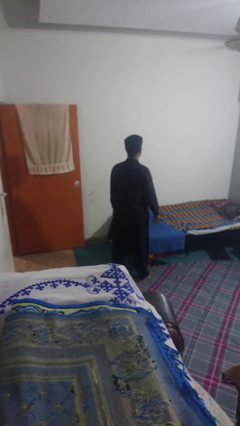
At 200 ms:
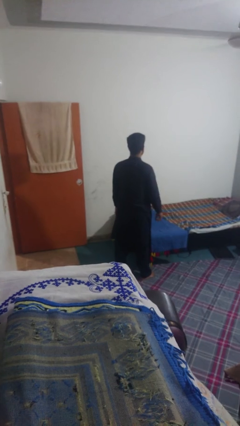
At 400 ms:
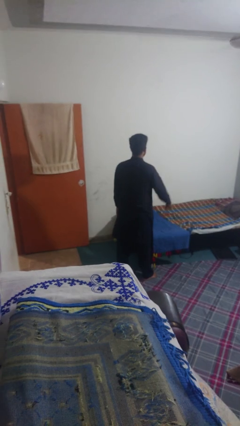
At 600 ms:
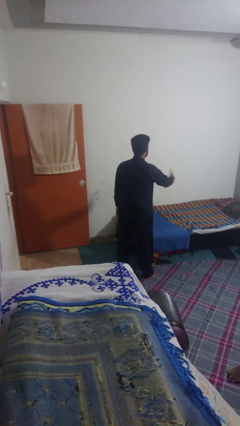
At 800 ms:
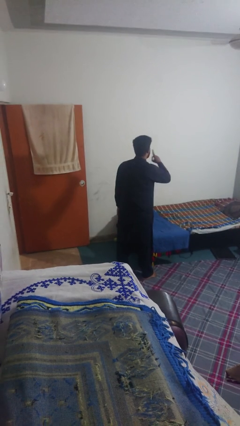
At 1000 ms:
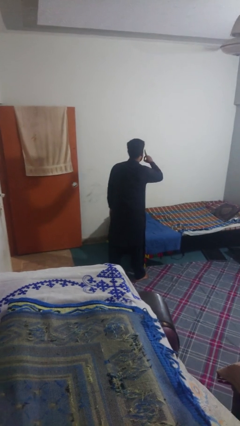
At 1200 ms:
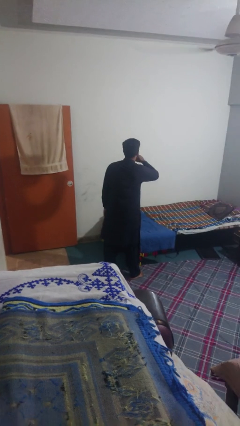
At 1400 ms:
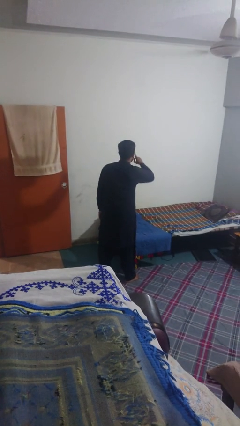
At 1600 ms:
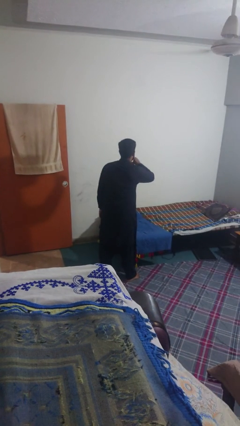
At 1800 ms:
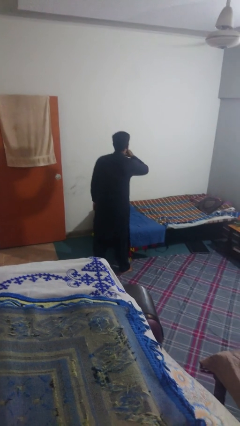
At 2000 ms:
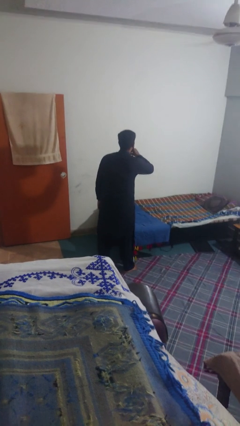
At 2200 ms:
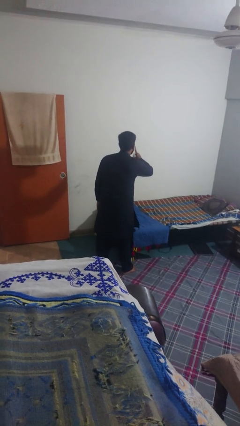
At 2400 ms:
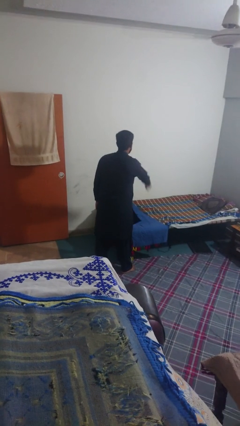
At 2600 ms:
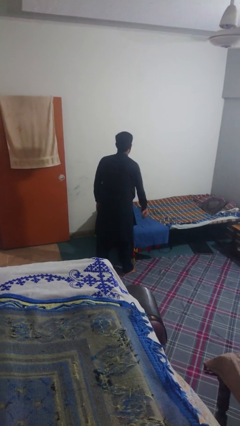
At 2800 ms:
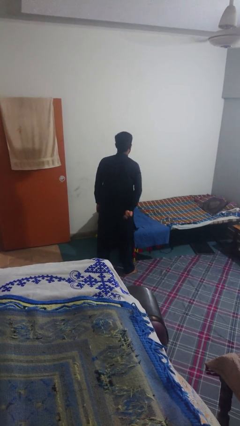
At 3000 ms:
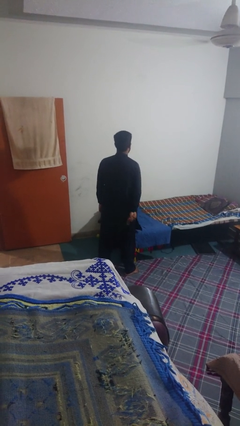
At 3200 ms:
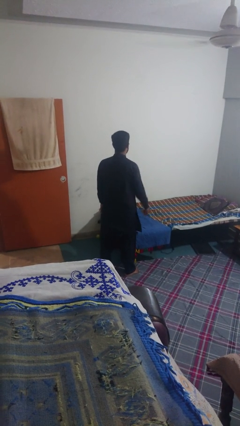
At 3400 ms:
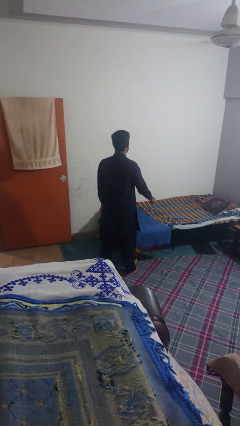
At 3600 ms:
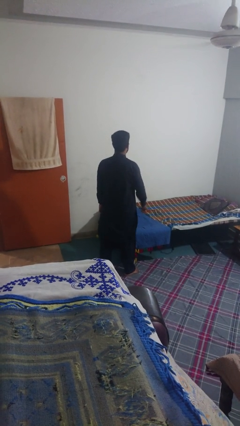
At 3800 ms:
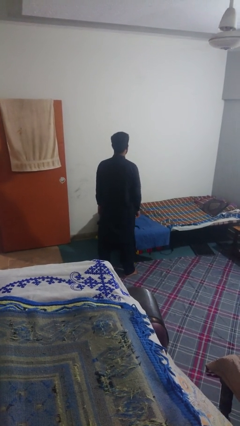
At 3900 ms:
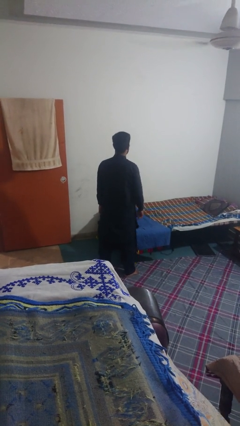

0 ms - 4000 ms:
person gestures be quiet

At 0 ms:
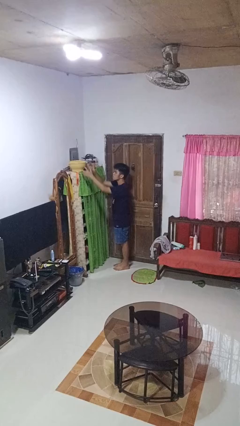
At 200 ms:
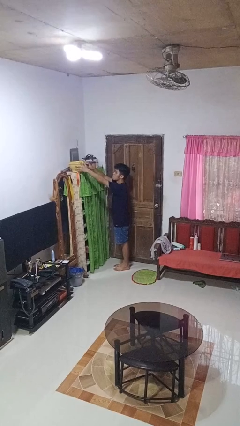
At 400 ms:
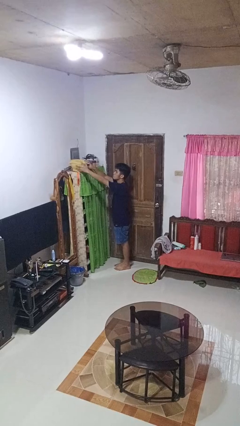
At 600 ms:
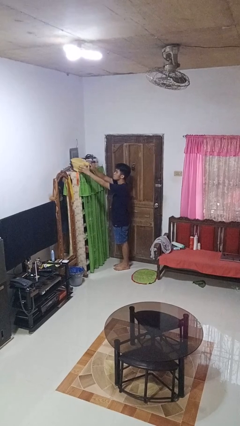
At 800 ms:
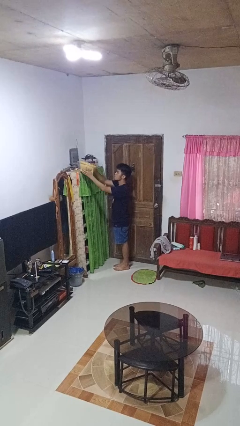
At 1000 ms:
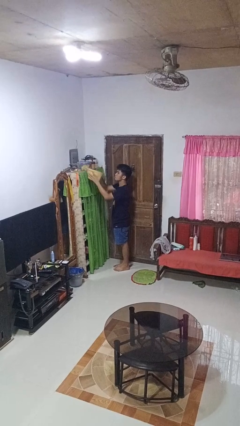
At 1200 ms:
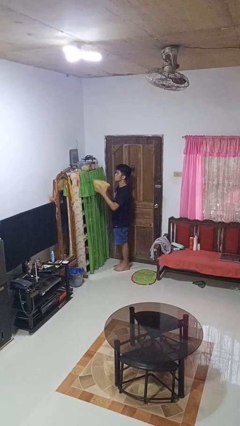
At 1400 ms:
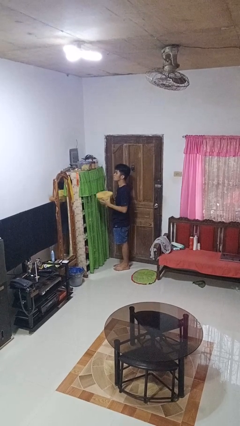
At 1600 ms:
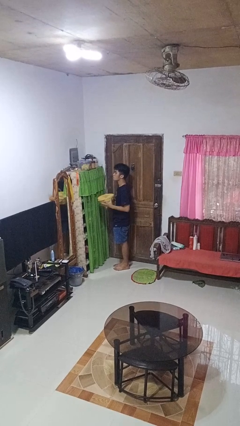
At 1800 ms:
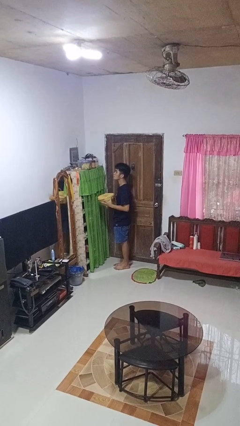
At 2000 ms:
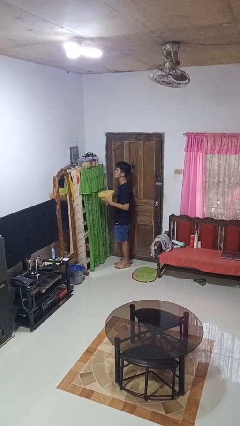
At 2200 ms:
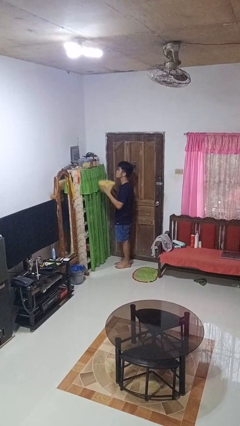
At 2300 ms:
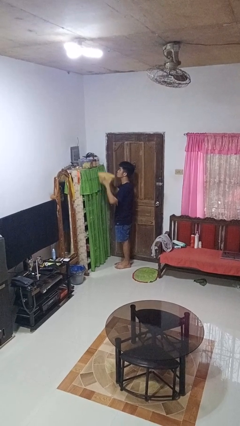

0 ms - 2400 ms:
person picks up object from shelf

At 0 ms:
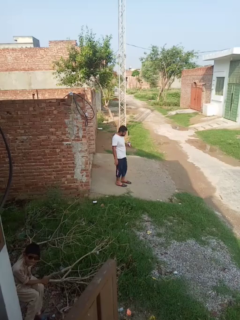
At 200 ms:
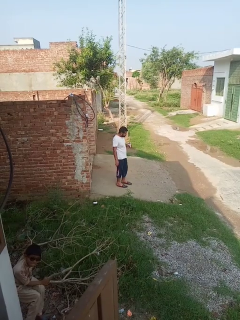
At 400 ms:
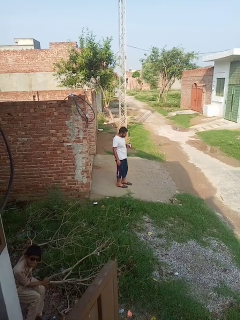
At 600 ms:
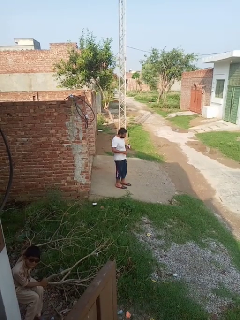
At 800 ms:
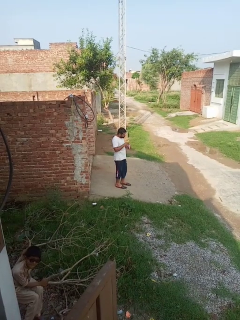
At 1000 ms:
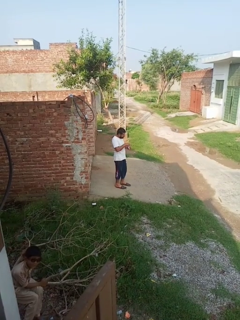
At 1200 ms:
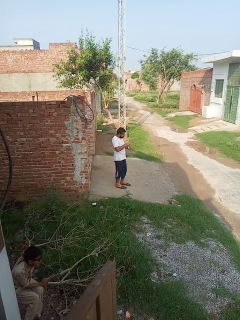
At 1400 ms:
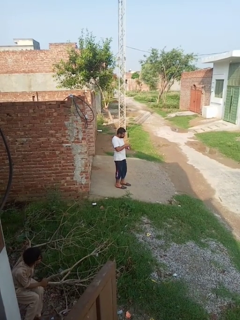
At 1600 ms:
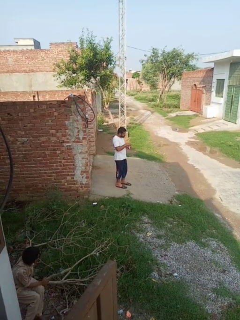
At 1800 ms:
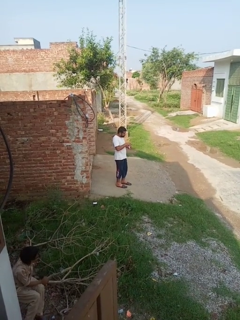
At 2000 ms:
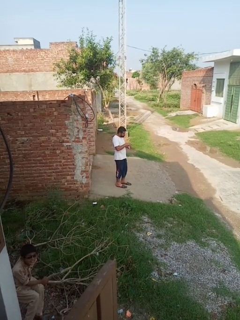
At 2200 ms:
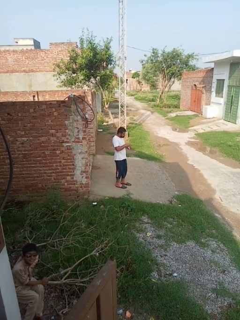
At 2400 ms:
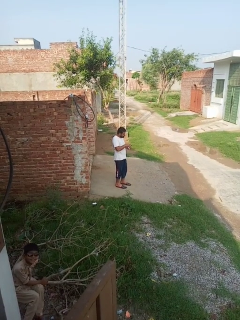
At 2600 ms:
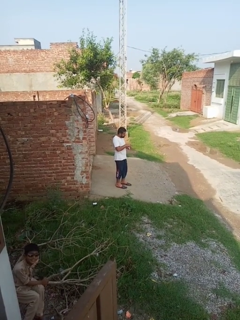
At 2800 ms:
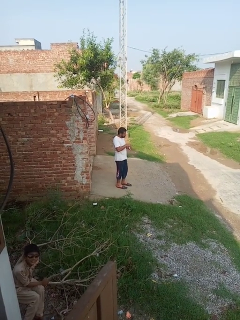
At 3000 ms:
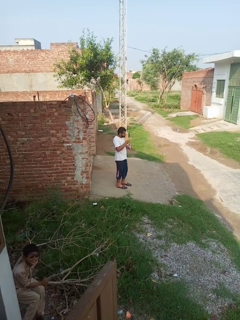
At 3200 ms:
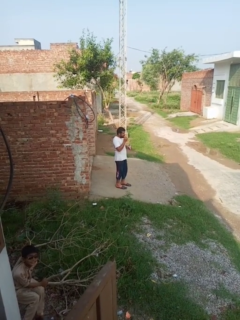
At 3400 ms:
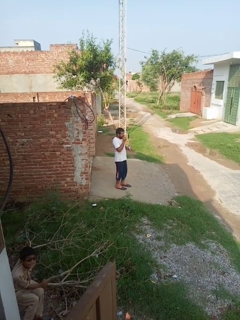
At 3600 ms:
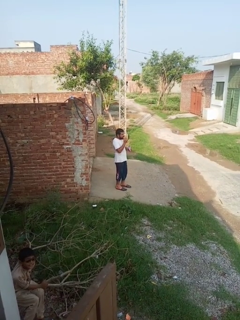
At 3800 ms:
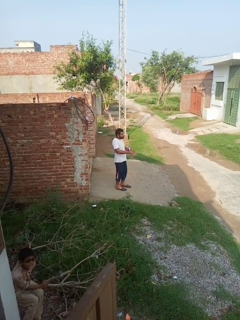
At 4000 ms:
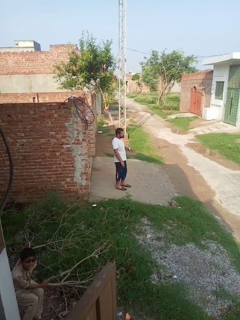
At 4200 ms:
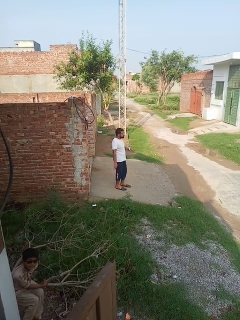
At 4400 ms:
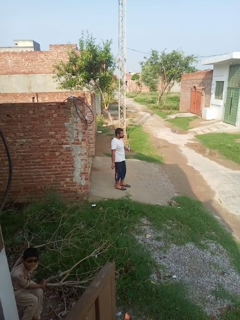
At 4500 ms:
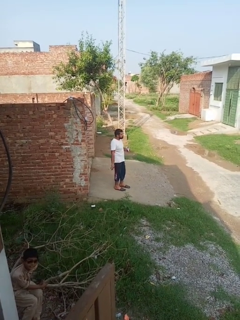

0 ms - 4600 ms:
person eats snack from bag

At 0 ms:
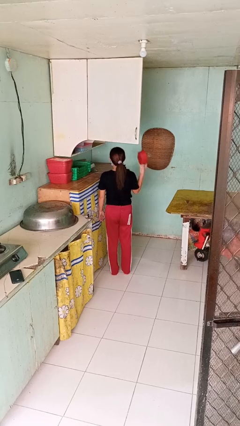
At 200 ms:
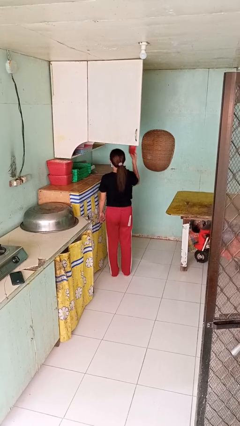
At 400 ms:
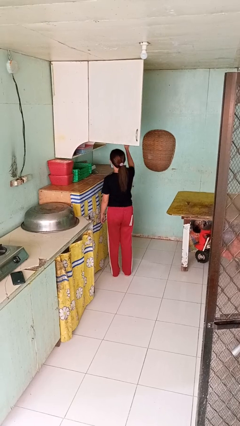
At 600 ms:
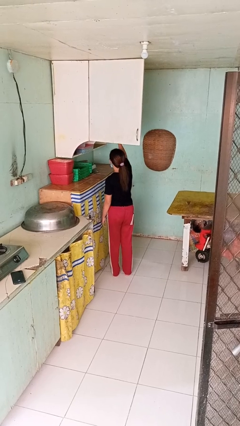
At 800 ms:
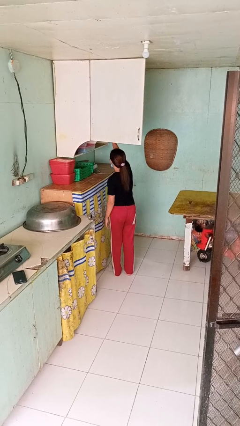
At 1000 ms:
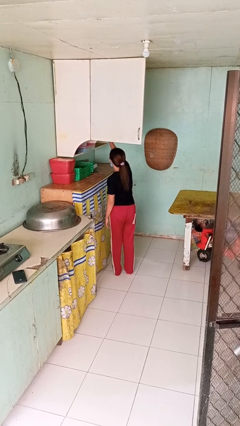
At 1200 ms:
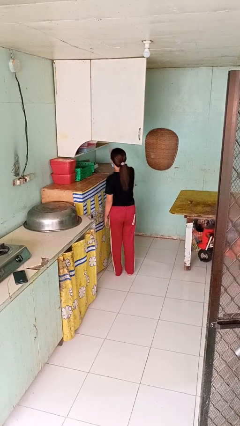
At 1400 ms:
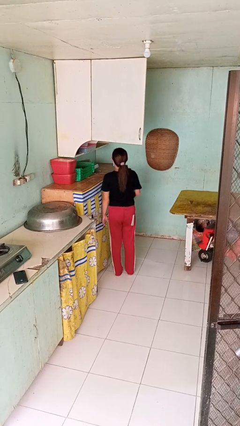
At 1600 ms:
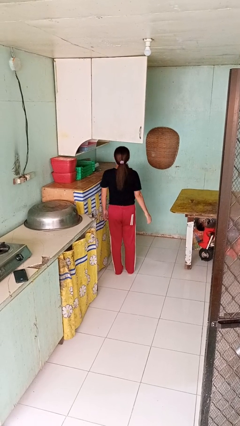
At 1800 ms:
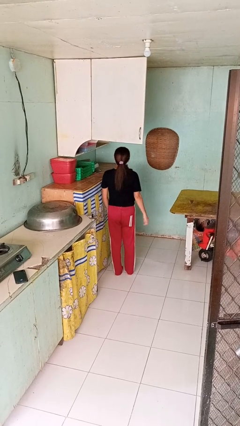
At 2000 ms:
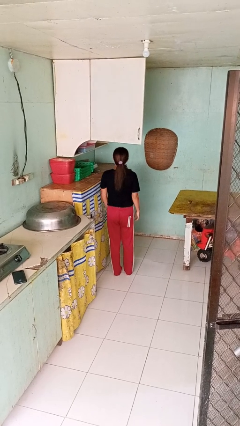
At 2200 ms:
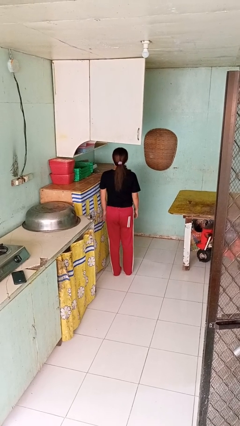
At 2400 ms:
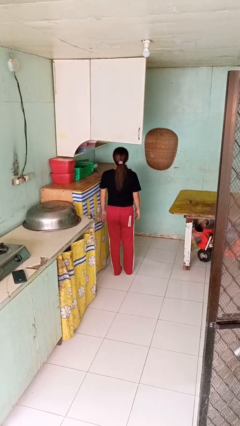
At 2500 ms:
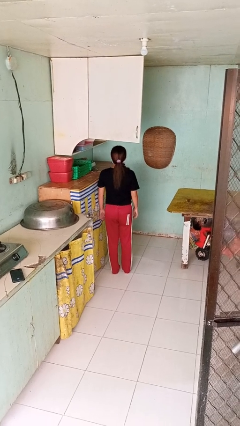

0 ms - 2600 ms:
person puts object in cabinet

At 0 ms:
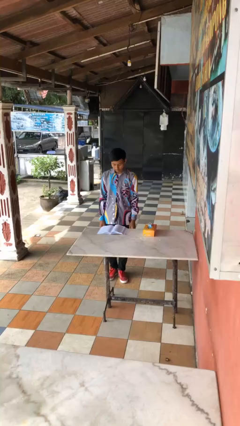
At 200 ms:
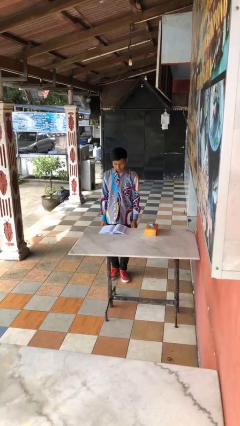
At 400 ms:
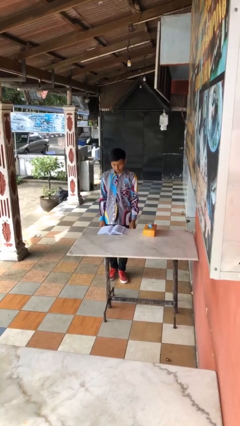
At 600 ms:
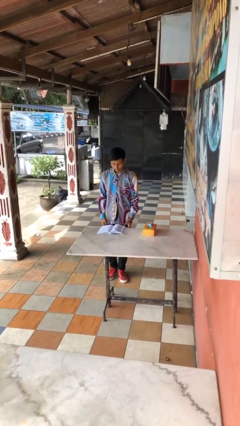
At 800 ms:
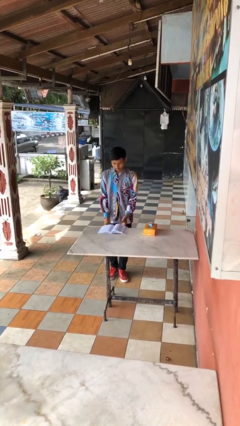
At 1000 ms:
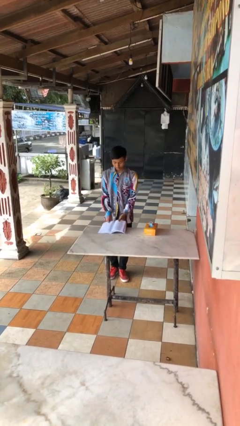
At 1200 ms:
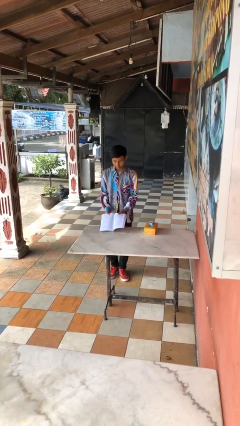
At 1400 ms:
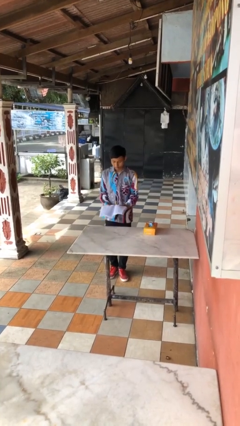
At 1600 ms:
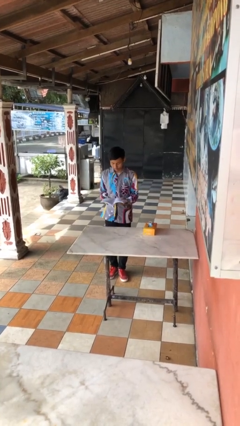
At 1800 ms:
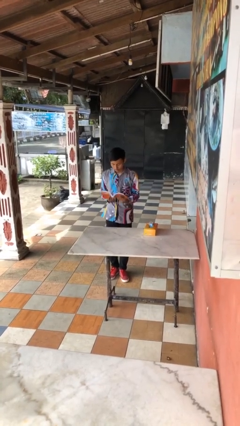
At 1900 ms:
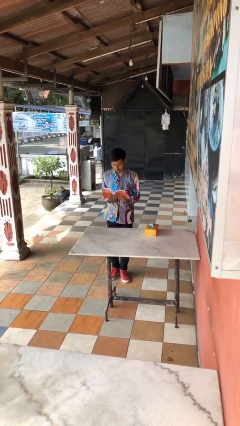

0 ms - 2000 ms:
person picks up object from table

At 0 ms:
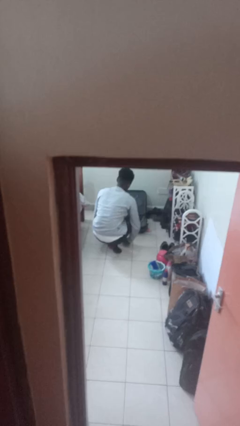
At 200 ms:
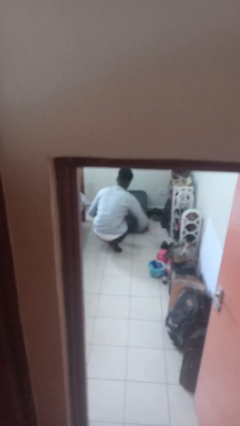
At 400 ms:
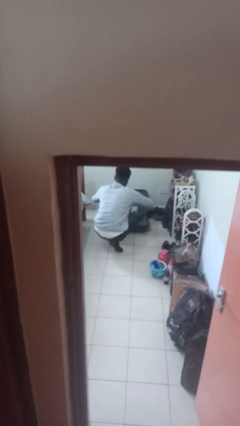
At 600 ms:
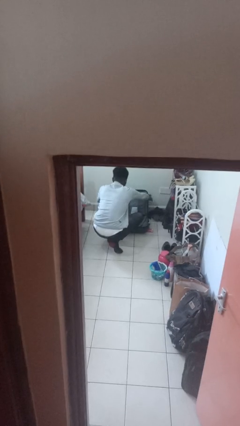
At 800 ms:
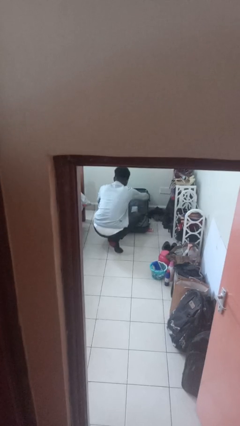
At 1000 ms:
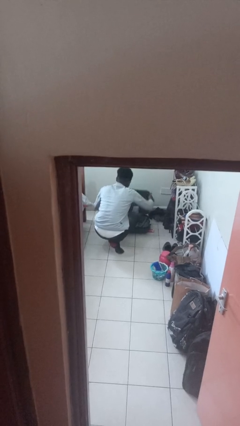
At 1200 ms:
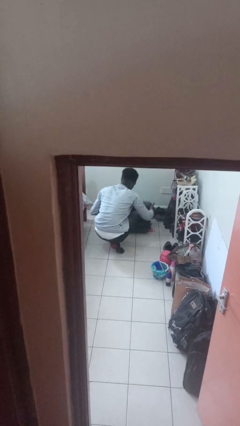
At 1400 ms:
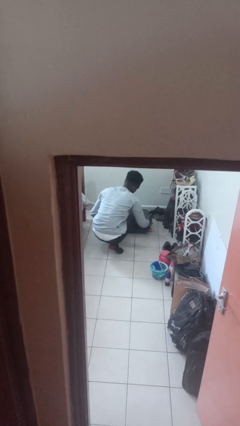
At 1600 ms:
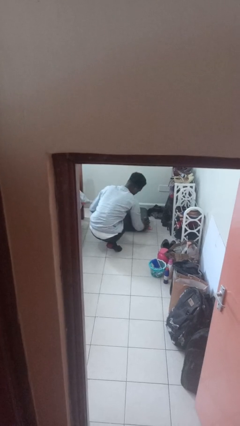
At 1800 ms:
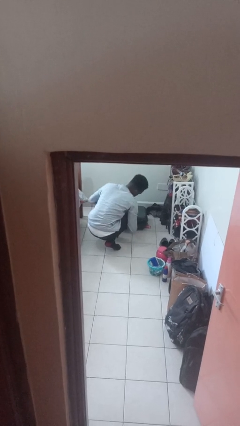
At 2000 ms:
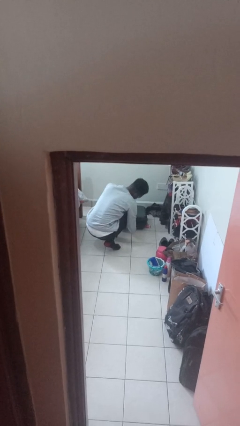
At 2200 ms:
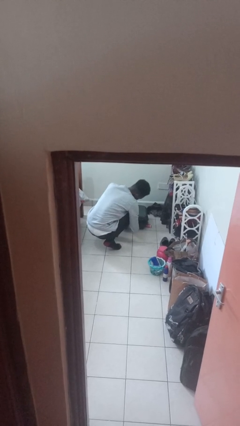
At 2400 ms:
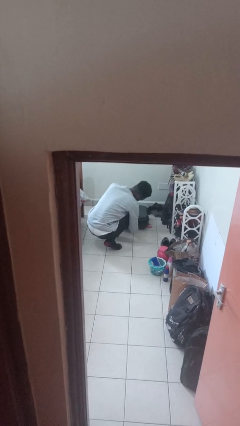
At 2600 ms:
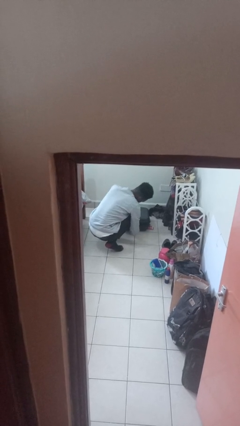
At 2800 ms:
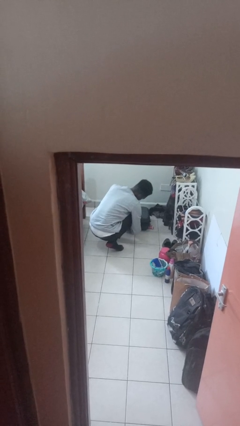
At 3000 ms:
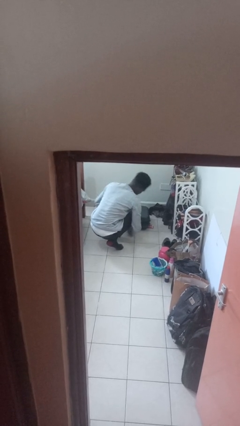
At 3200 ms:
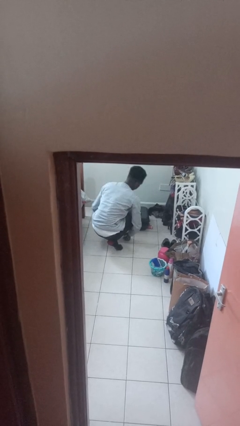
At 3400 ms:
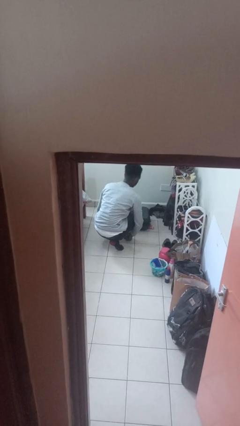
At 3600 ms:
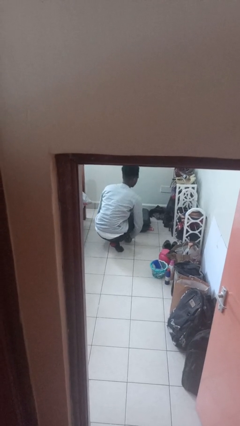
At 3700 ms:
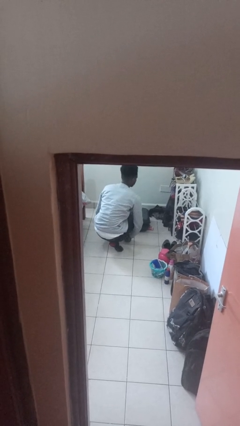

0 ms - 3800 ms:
person closes suitcase
